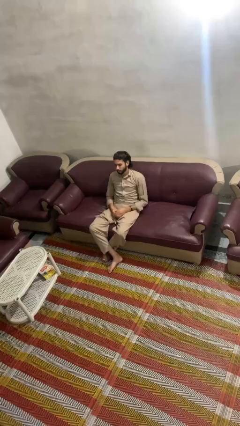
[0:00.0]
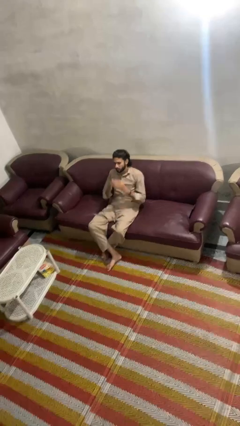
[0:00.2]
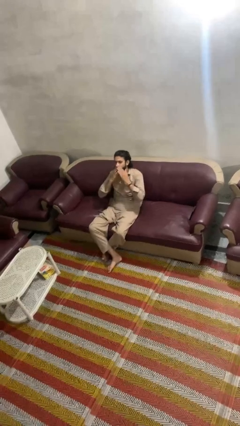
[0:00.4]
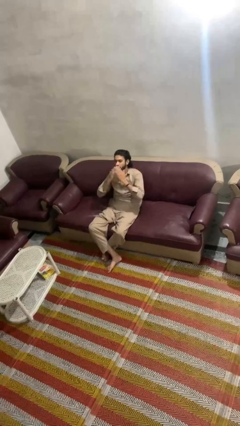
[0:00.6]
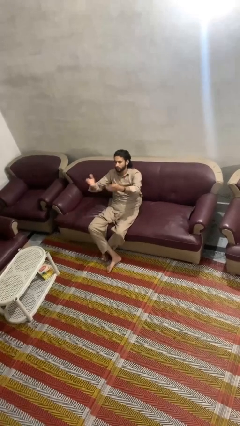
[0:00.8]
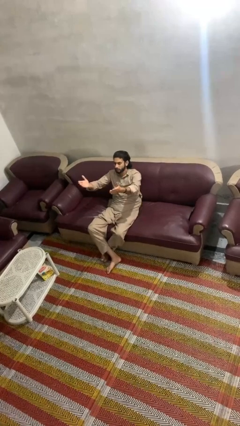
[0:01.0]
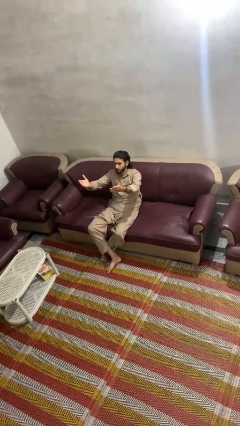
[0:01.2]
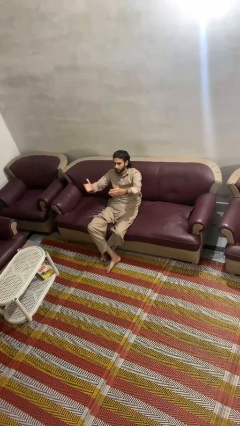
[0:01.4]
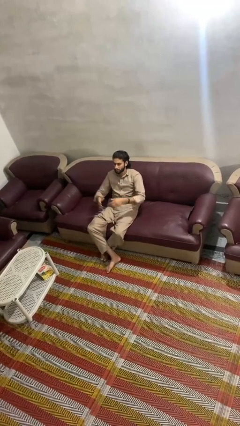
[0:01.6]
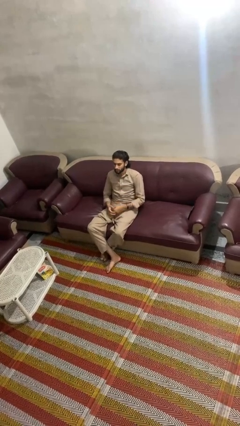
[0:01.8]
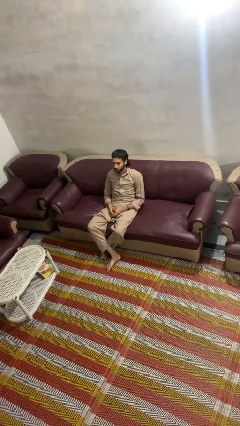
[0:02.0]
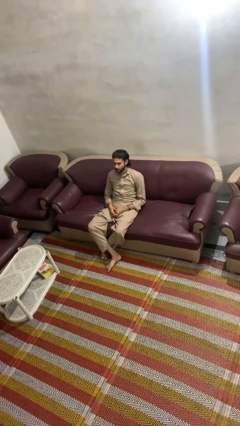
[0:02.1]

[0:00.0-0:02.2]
person gestures blow kiss

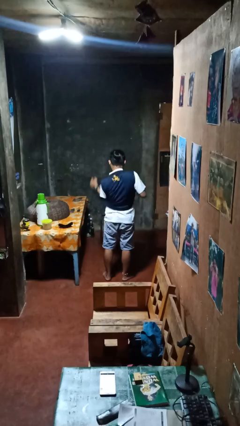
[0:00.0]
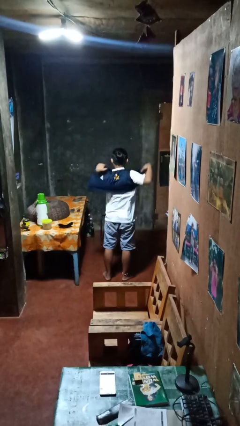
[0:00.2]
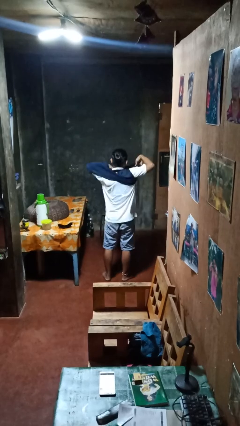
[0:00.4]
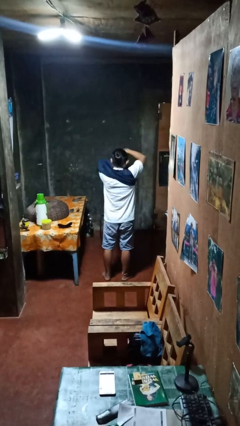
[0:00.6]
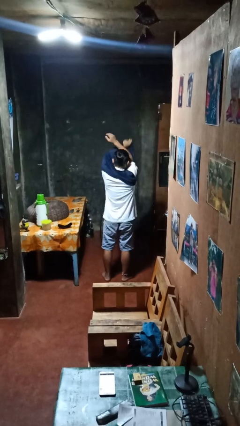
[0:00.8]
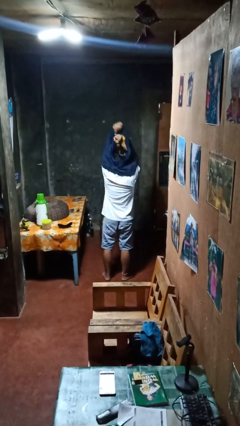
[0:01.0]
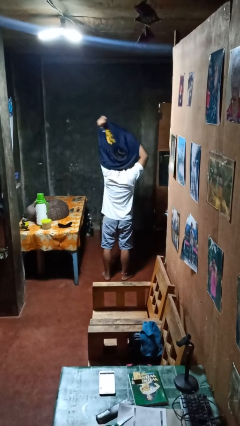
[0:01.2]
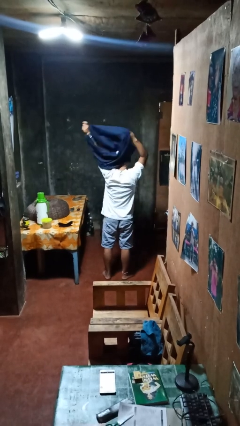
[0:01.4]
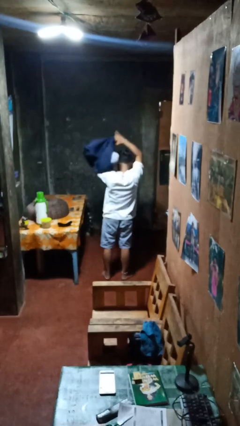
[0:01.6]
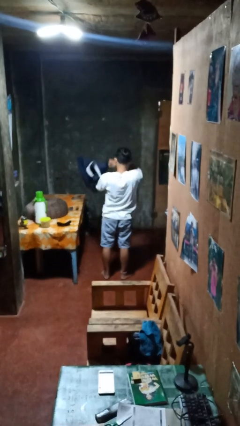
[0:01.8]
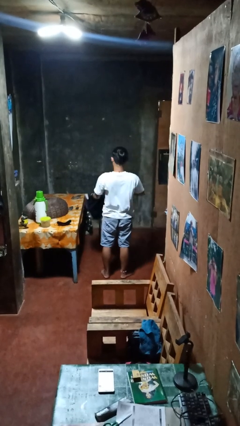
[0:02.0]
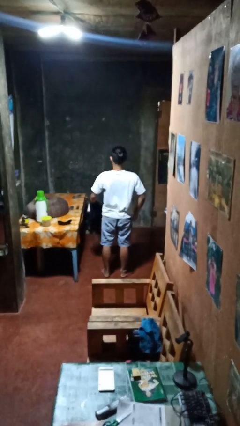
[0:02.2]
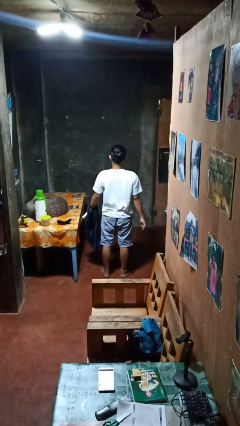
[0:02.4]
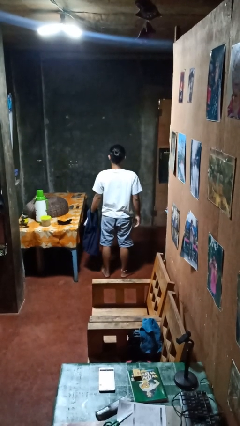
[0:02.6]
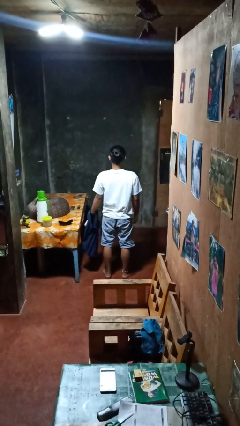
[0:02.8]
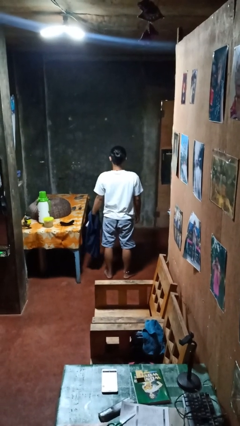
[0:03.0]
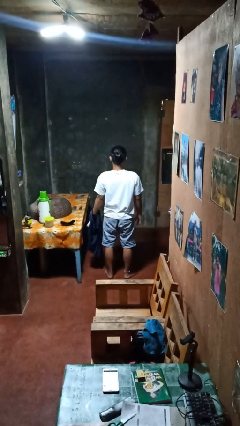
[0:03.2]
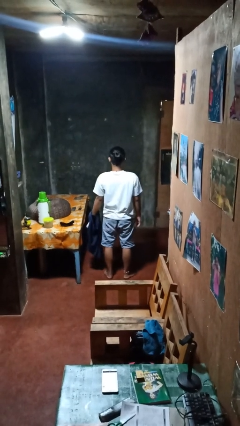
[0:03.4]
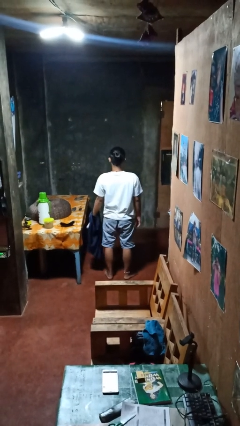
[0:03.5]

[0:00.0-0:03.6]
person takes off shirt

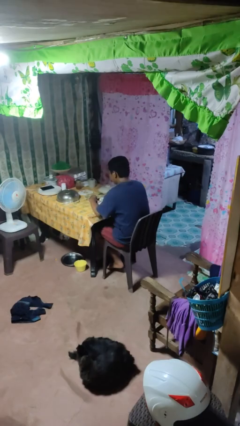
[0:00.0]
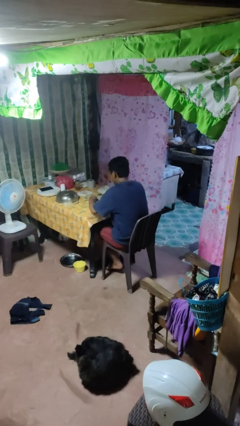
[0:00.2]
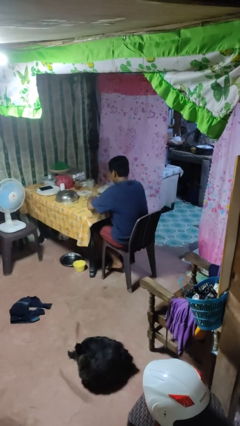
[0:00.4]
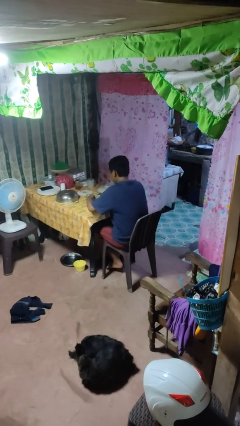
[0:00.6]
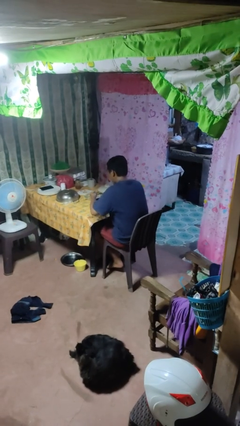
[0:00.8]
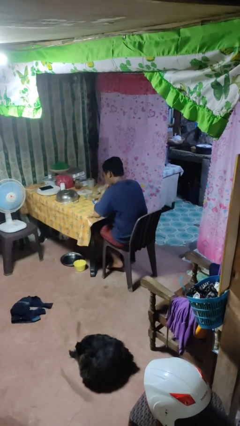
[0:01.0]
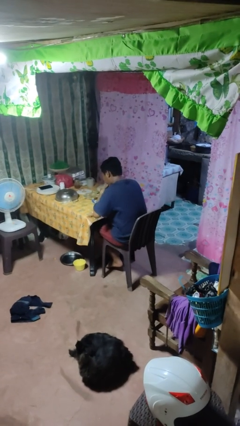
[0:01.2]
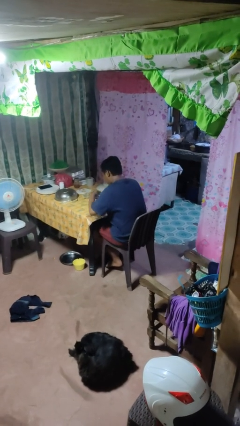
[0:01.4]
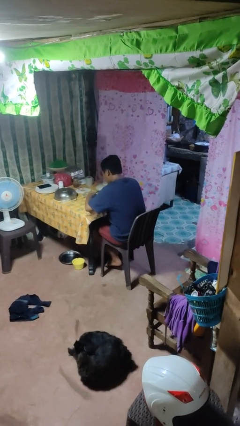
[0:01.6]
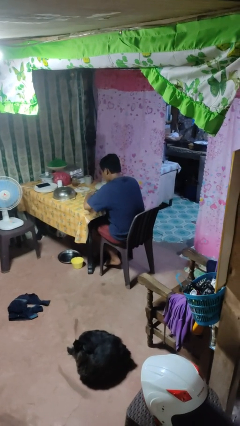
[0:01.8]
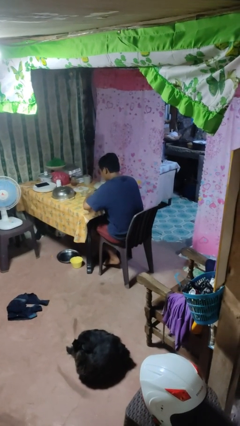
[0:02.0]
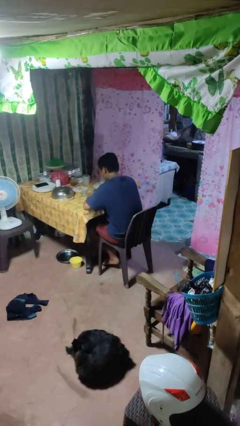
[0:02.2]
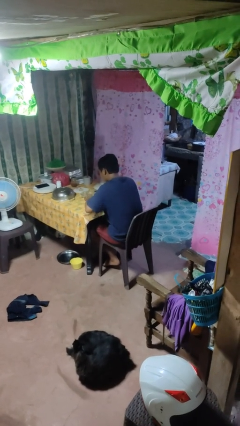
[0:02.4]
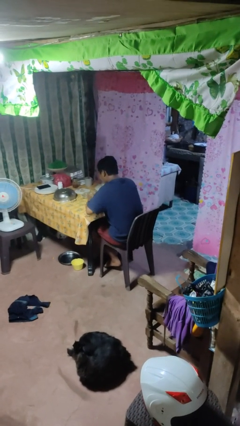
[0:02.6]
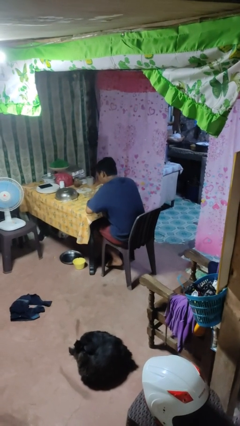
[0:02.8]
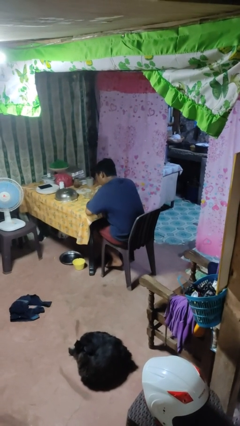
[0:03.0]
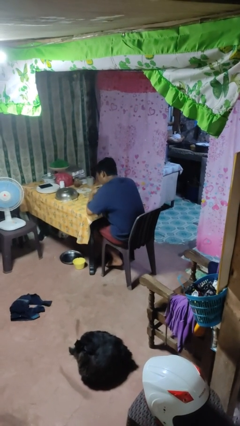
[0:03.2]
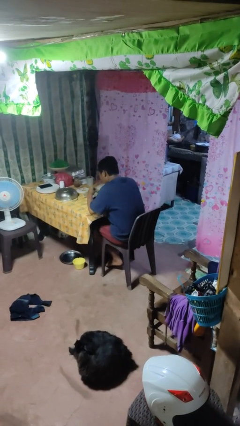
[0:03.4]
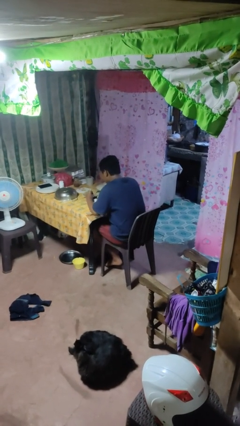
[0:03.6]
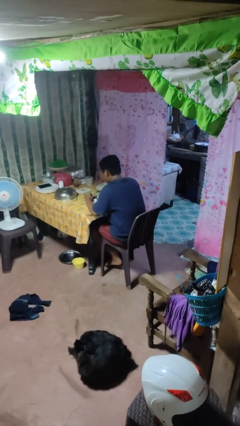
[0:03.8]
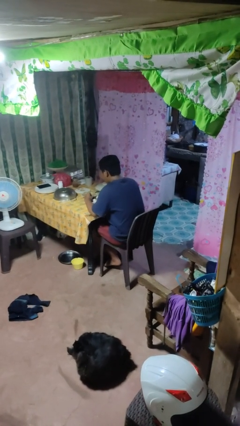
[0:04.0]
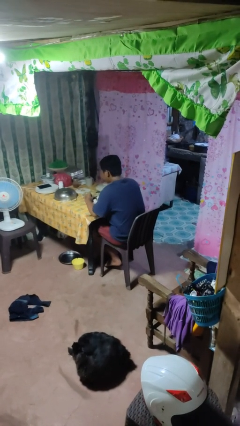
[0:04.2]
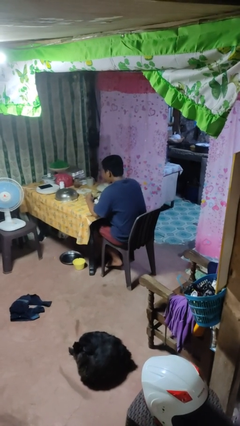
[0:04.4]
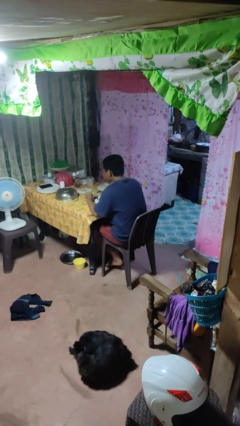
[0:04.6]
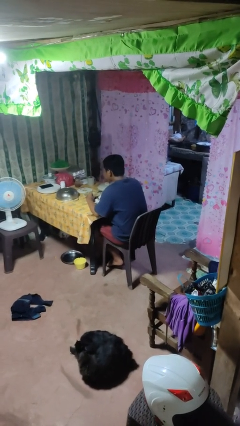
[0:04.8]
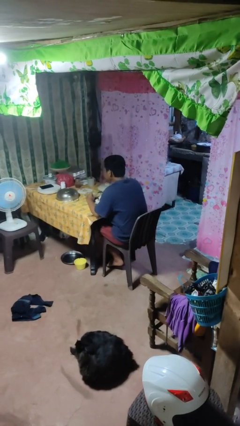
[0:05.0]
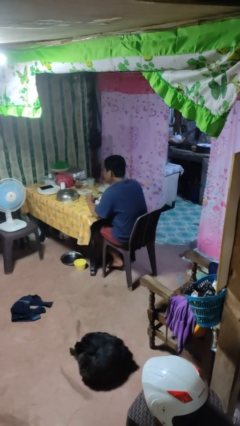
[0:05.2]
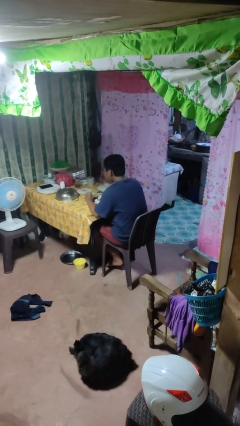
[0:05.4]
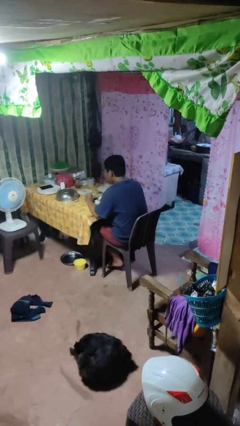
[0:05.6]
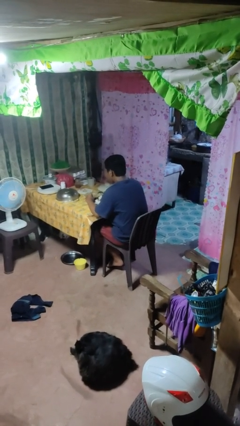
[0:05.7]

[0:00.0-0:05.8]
person eats with hands

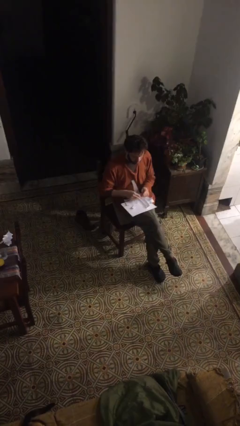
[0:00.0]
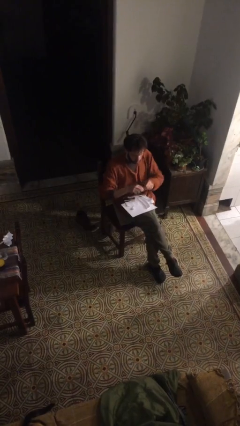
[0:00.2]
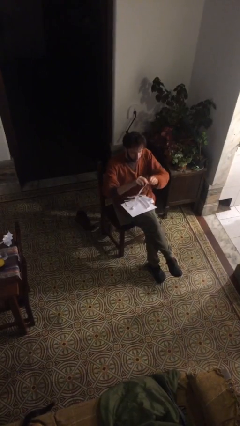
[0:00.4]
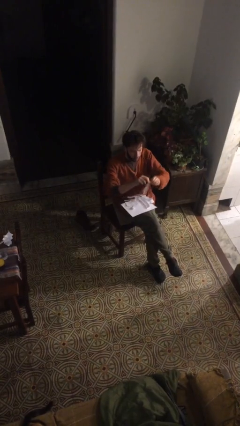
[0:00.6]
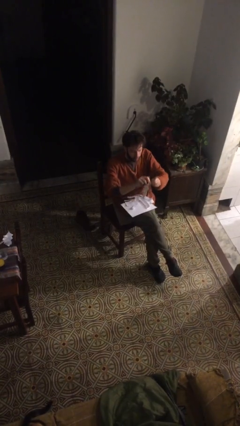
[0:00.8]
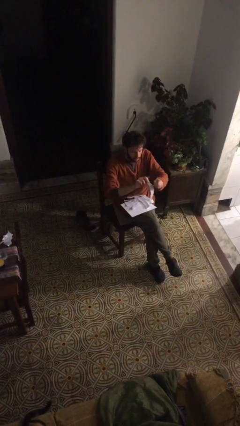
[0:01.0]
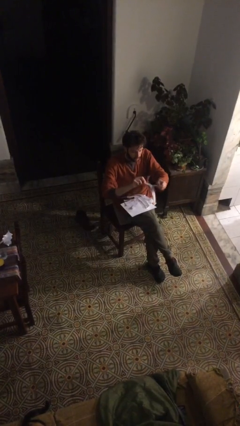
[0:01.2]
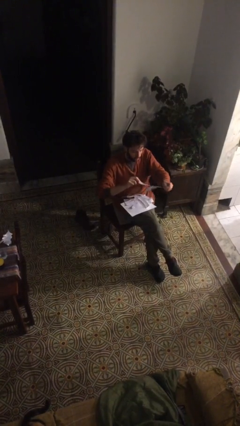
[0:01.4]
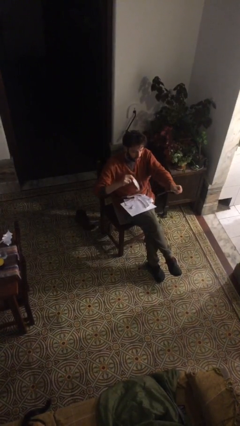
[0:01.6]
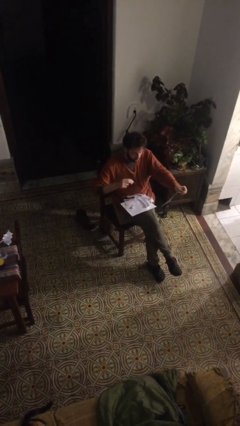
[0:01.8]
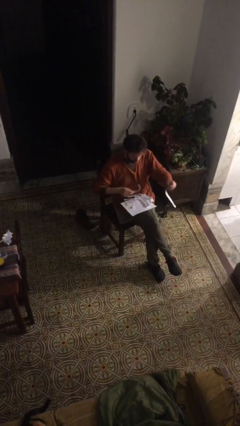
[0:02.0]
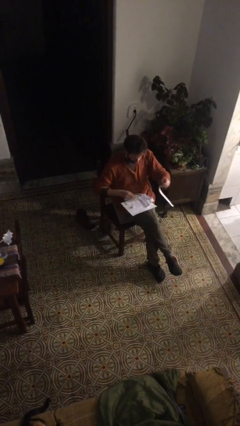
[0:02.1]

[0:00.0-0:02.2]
person tears paper

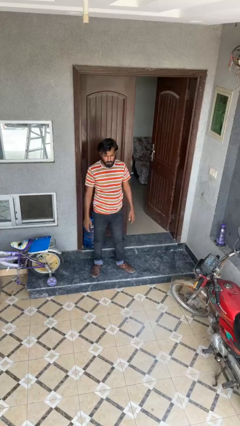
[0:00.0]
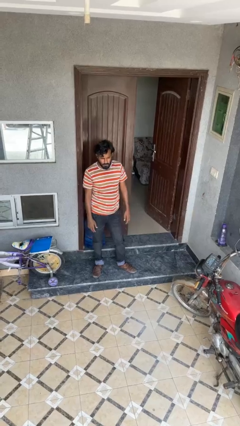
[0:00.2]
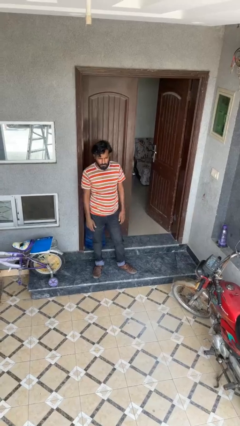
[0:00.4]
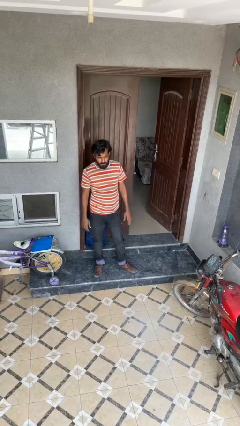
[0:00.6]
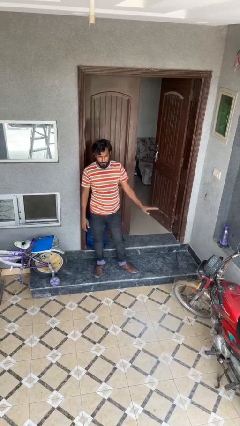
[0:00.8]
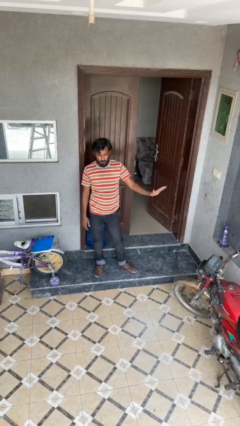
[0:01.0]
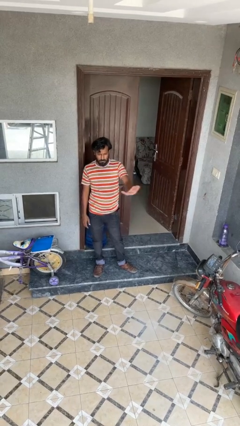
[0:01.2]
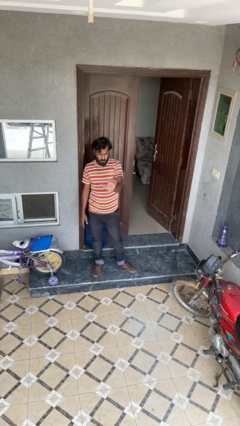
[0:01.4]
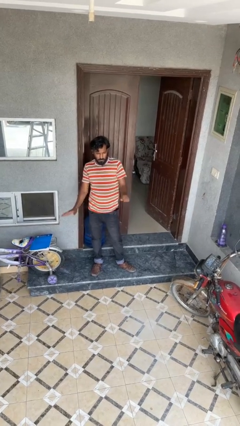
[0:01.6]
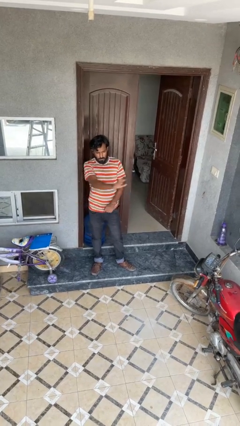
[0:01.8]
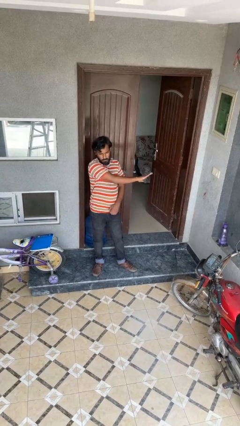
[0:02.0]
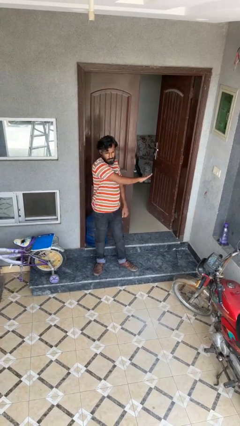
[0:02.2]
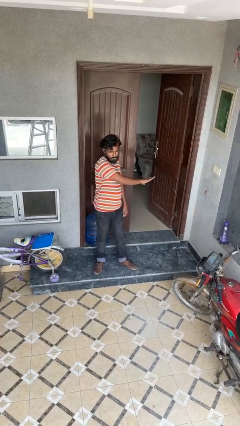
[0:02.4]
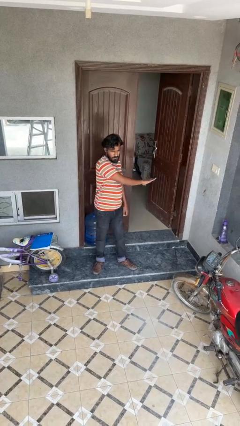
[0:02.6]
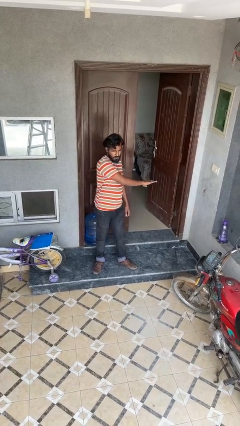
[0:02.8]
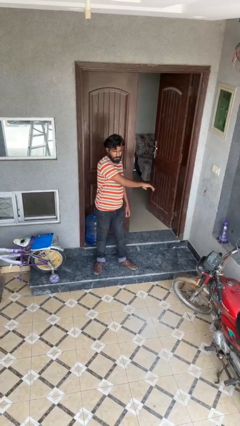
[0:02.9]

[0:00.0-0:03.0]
person gestures swipe left

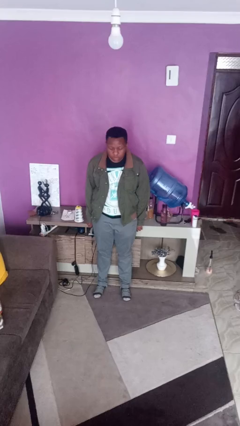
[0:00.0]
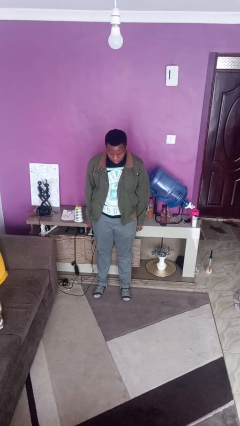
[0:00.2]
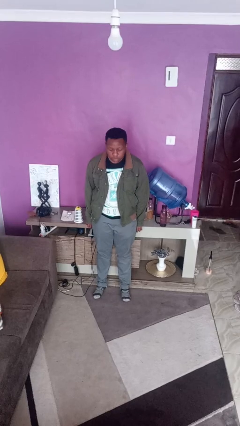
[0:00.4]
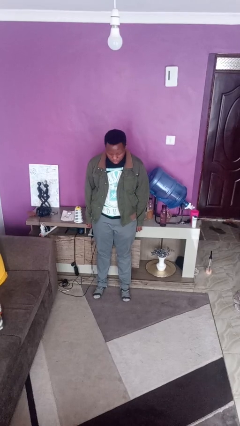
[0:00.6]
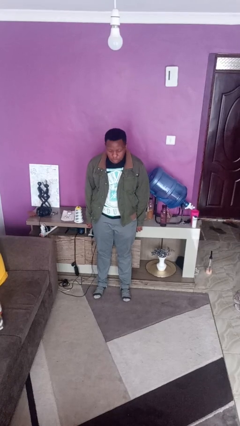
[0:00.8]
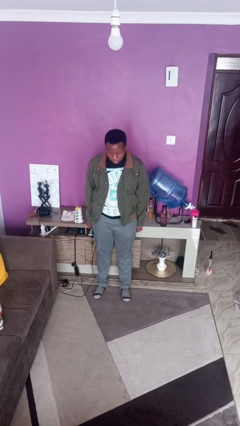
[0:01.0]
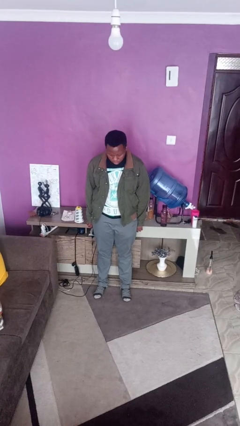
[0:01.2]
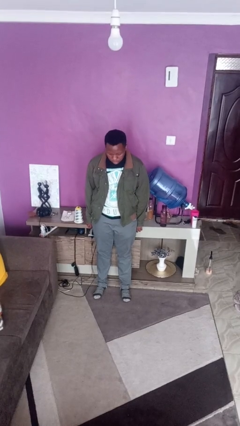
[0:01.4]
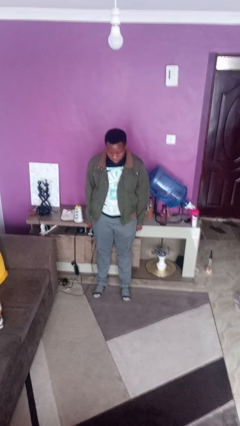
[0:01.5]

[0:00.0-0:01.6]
person nods head
